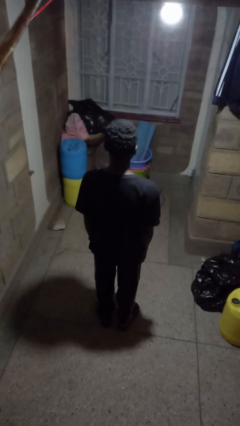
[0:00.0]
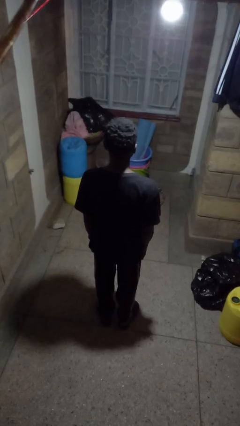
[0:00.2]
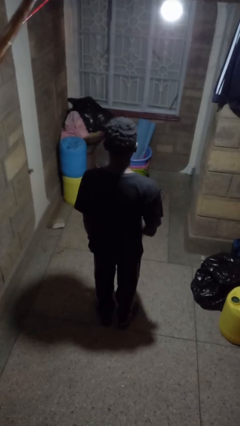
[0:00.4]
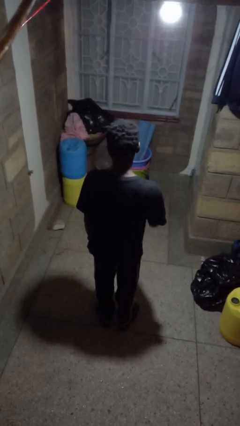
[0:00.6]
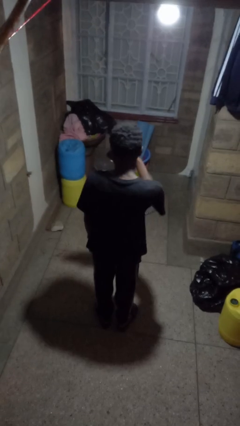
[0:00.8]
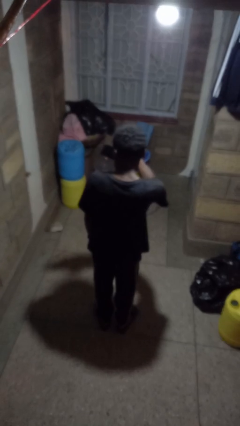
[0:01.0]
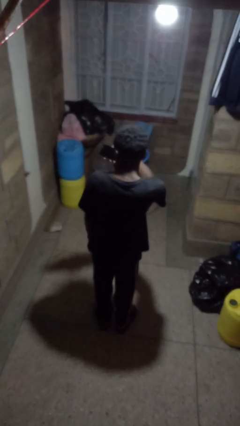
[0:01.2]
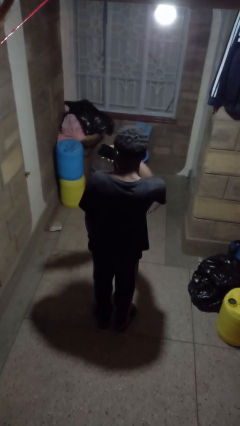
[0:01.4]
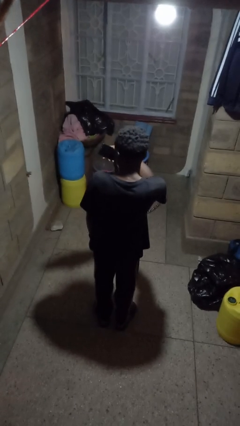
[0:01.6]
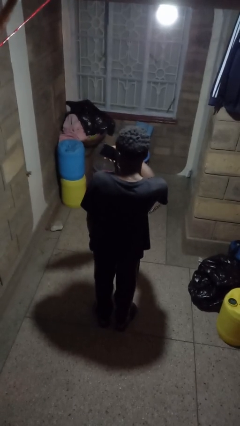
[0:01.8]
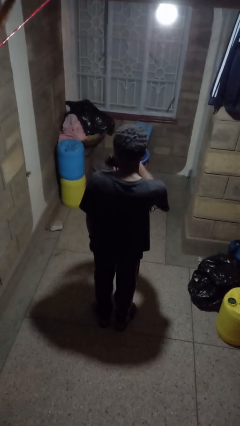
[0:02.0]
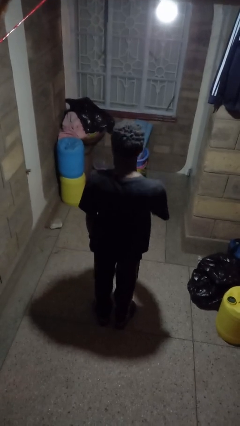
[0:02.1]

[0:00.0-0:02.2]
person takes selfie

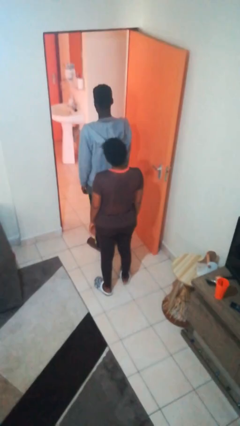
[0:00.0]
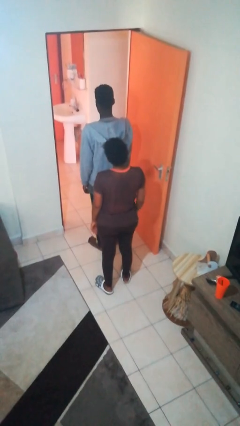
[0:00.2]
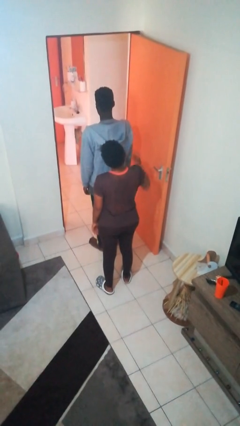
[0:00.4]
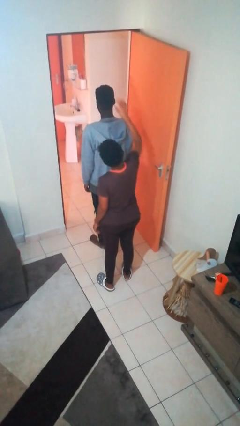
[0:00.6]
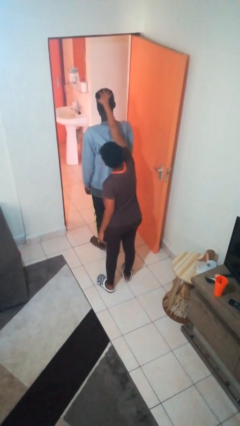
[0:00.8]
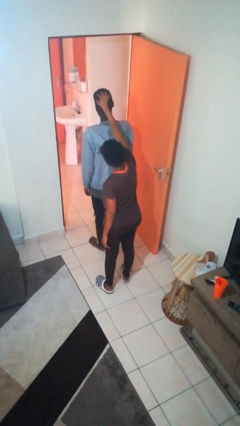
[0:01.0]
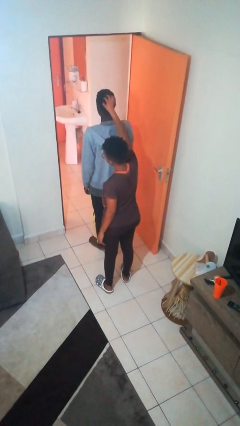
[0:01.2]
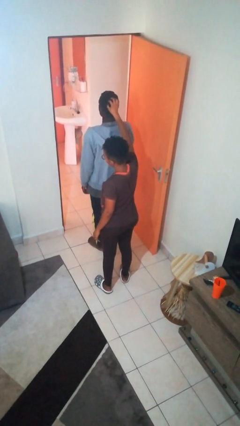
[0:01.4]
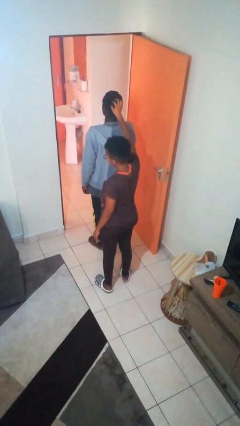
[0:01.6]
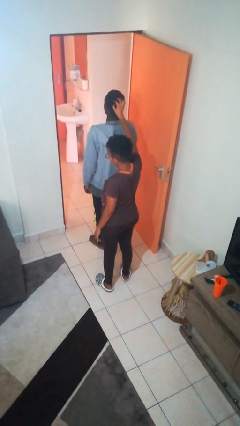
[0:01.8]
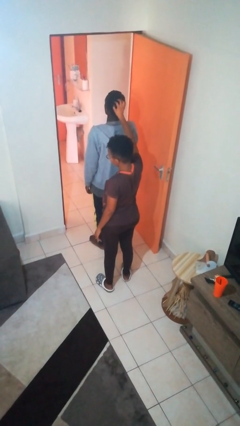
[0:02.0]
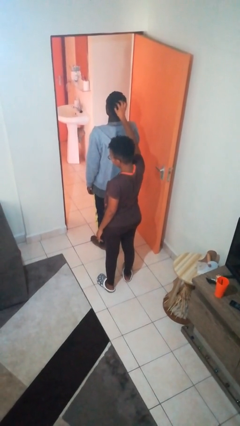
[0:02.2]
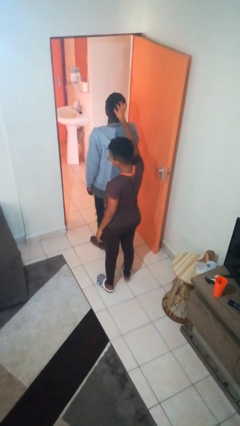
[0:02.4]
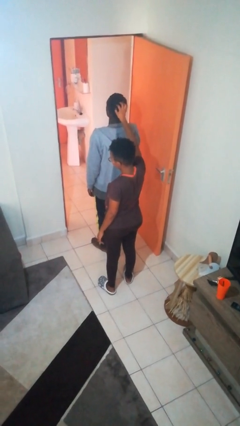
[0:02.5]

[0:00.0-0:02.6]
person grabs person by hair

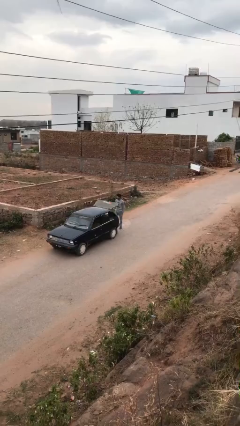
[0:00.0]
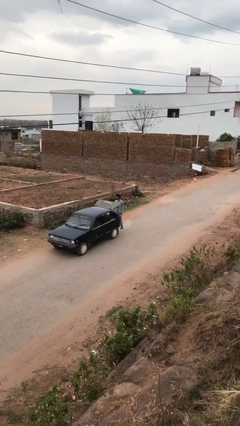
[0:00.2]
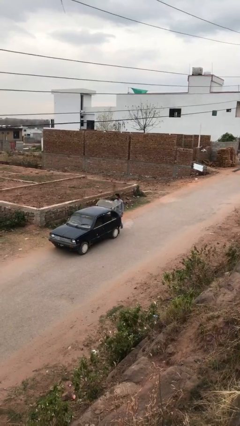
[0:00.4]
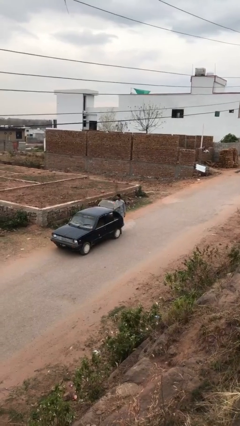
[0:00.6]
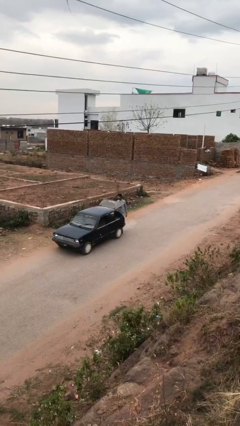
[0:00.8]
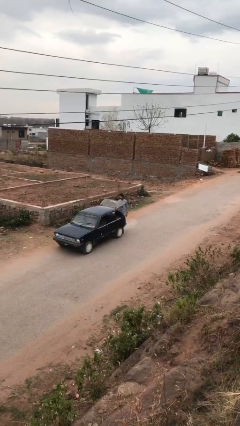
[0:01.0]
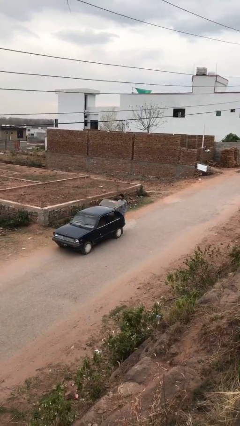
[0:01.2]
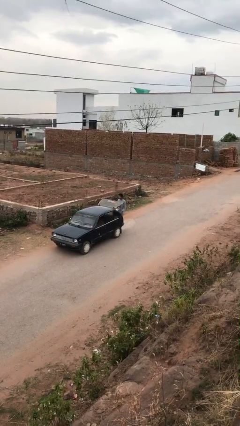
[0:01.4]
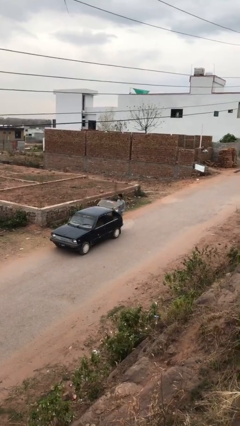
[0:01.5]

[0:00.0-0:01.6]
person unloads car

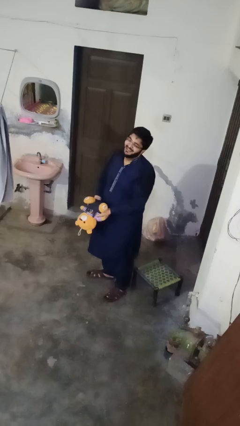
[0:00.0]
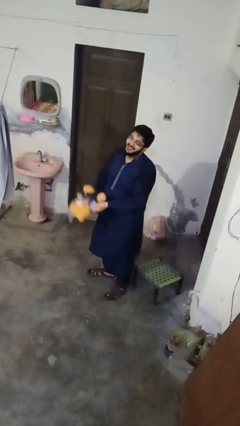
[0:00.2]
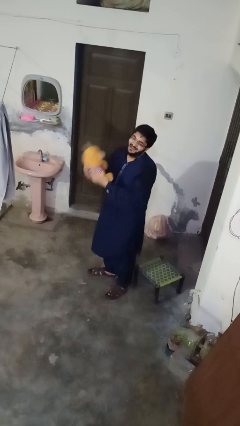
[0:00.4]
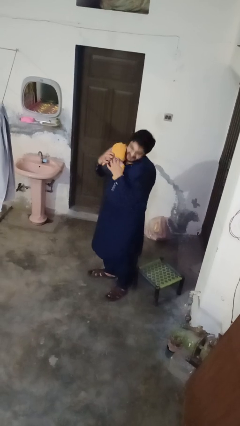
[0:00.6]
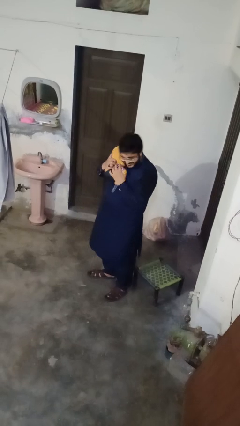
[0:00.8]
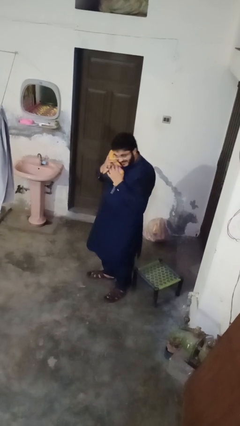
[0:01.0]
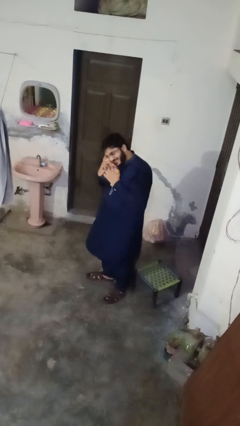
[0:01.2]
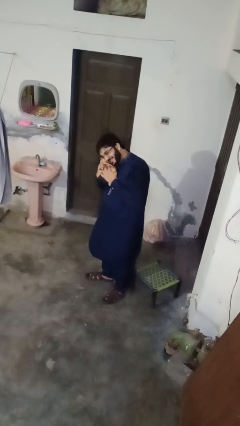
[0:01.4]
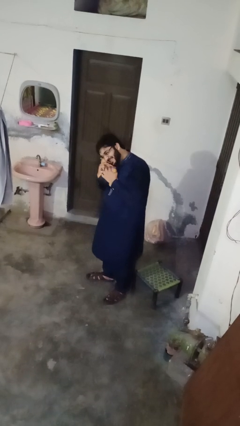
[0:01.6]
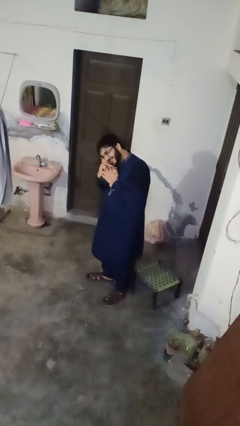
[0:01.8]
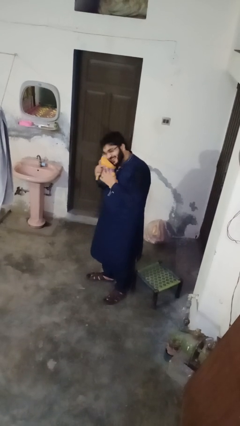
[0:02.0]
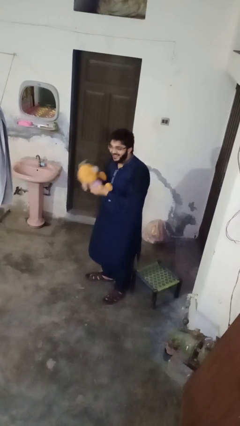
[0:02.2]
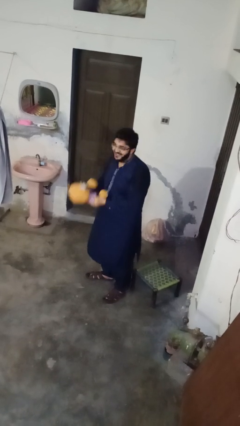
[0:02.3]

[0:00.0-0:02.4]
person hugs stuffed animal

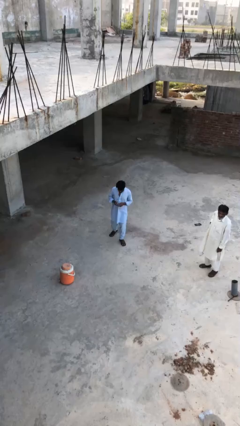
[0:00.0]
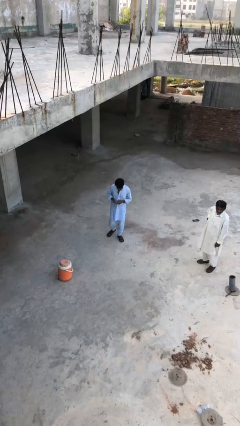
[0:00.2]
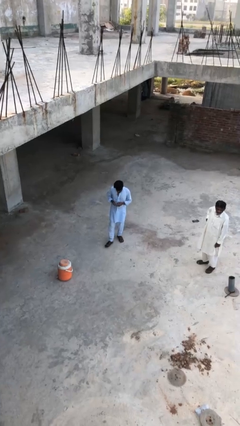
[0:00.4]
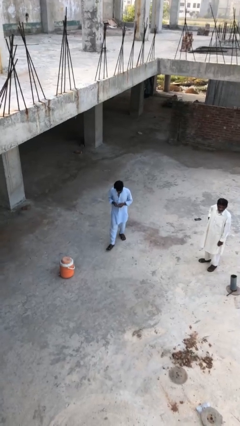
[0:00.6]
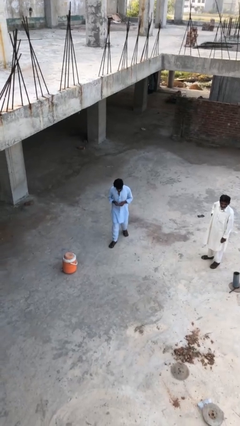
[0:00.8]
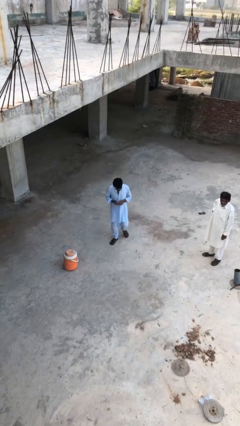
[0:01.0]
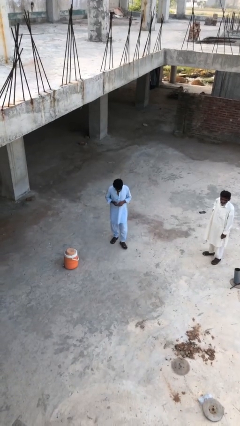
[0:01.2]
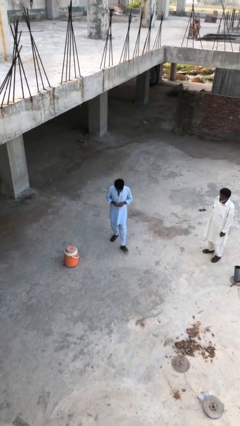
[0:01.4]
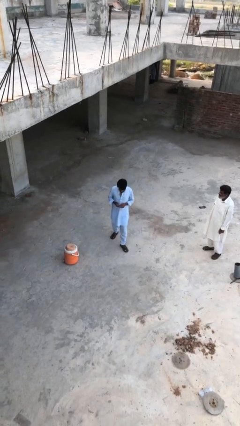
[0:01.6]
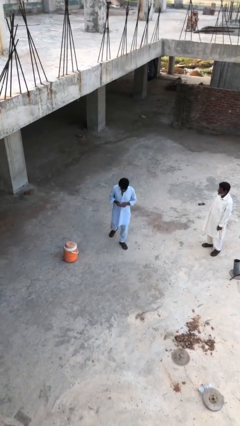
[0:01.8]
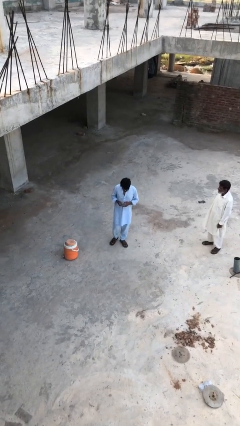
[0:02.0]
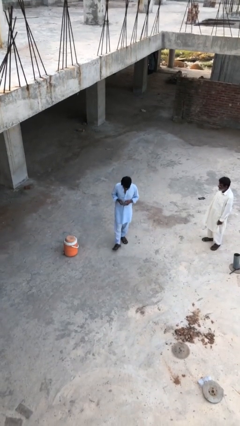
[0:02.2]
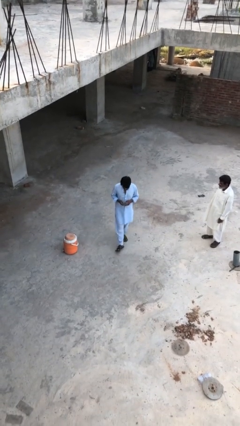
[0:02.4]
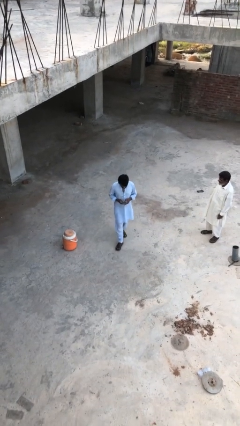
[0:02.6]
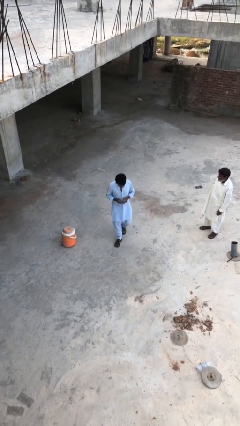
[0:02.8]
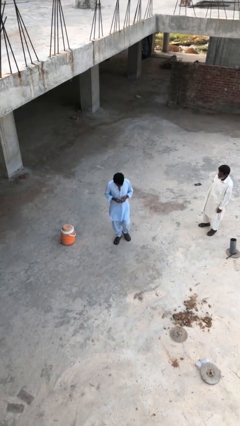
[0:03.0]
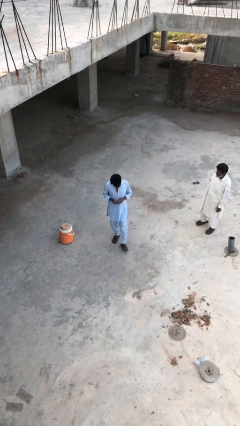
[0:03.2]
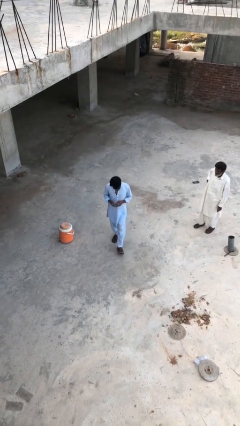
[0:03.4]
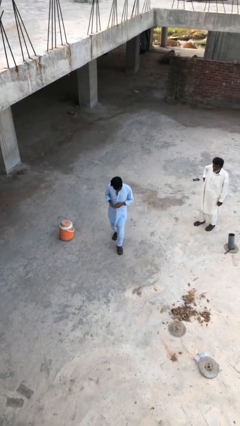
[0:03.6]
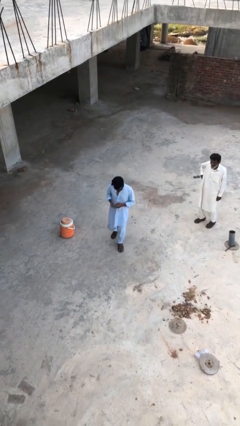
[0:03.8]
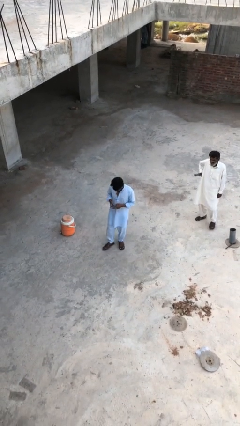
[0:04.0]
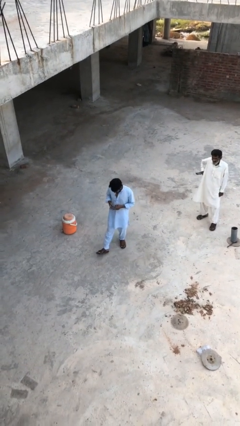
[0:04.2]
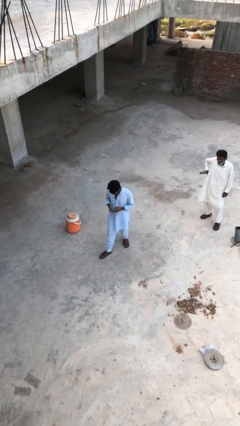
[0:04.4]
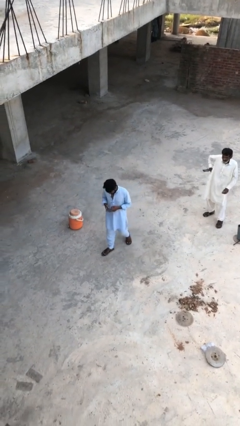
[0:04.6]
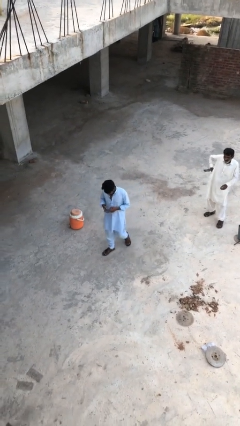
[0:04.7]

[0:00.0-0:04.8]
person texts on phone

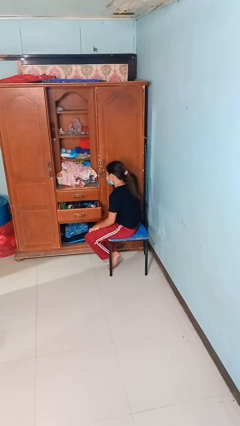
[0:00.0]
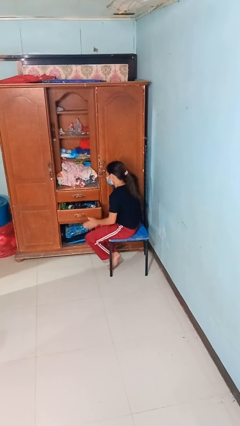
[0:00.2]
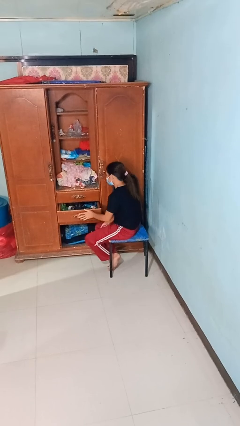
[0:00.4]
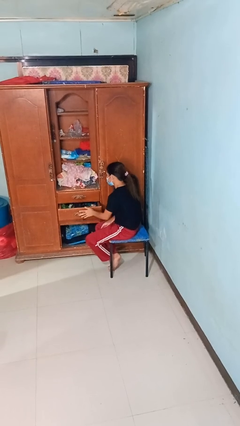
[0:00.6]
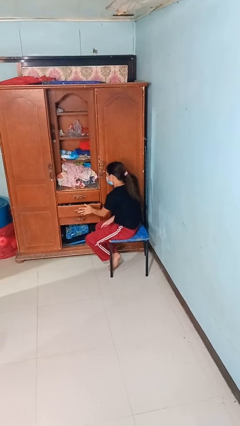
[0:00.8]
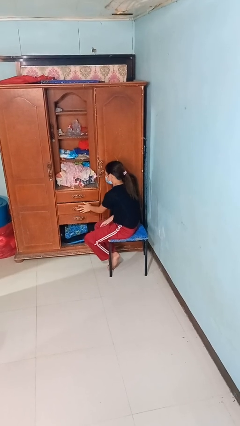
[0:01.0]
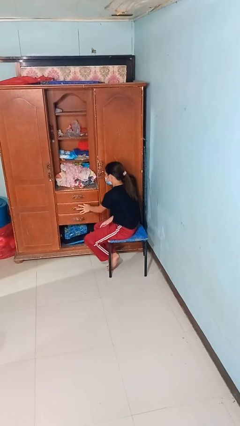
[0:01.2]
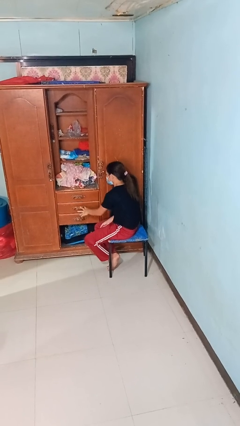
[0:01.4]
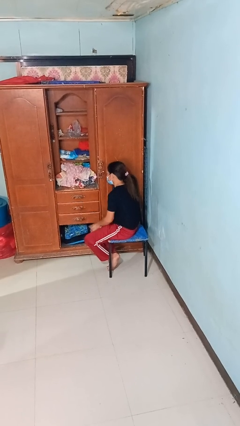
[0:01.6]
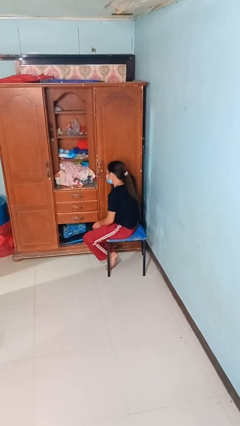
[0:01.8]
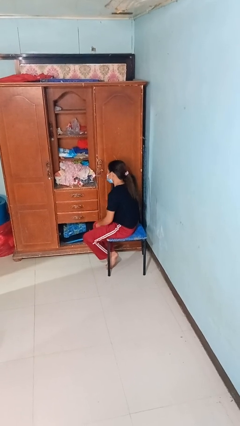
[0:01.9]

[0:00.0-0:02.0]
person closes dresser drawer

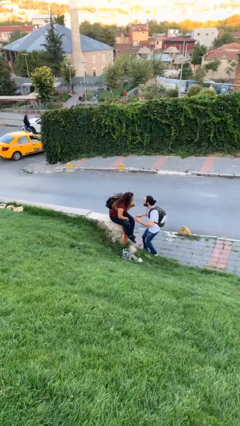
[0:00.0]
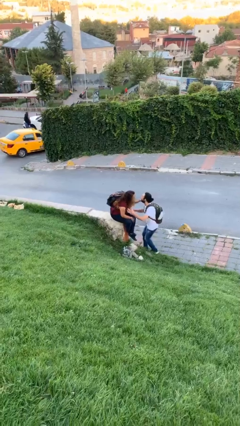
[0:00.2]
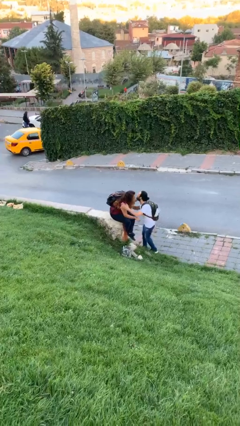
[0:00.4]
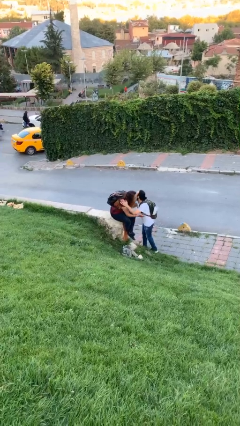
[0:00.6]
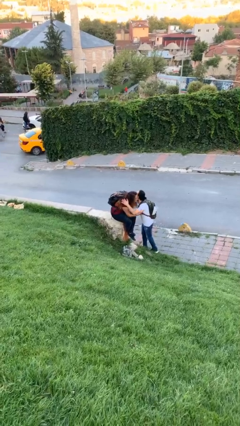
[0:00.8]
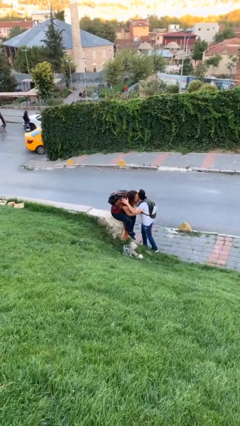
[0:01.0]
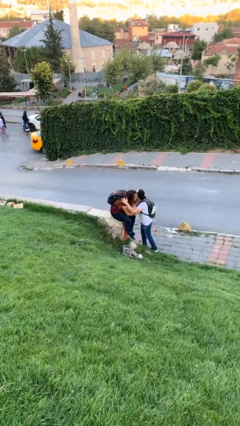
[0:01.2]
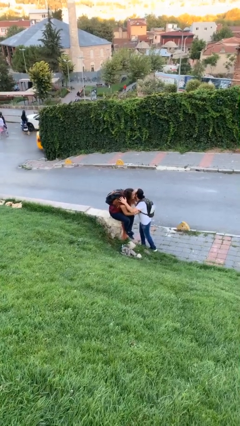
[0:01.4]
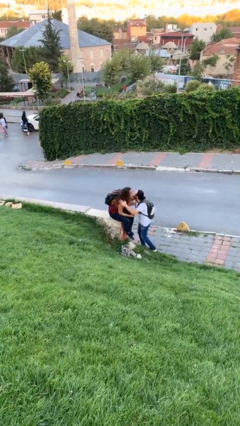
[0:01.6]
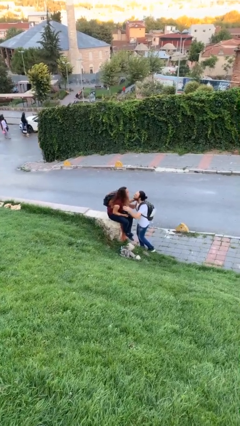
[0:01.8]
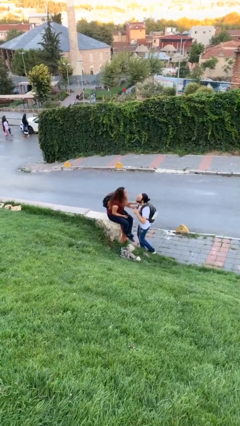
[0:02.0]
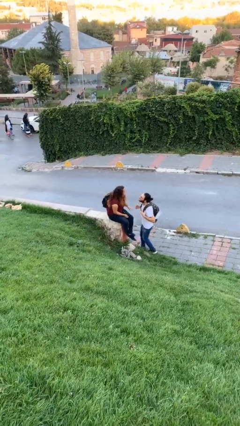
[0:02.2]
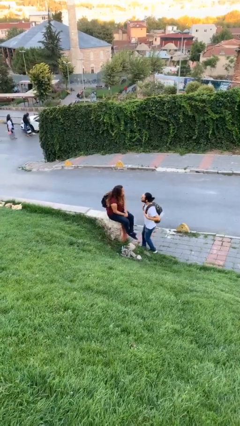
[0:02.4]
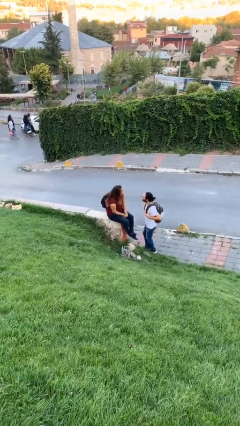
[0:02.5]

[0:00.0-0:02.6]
person embraces person
